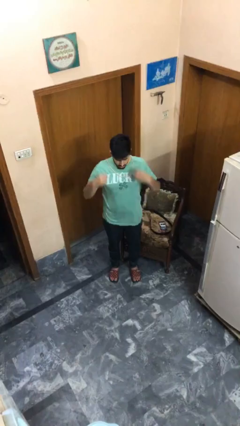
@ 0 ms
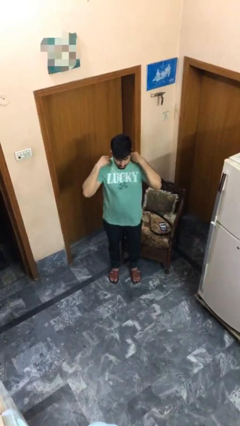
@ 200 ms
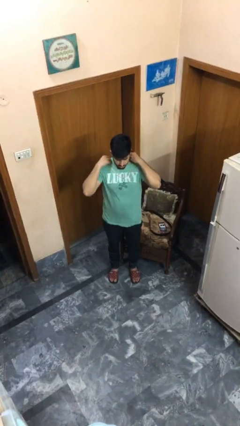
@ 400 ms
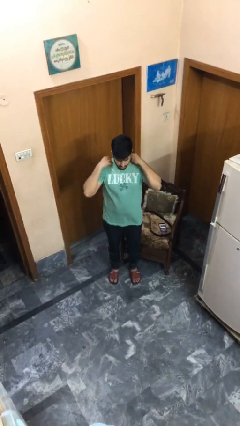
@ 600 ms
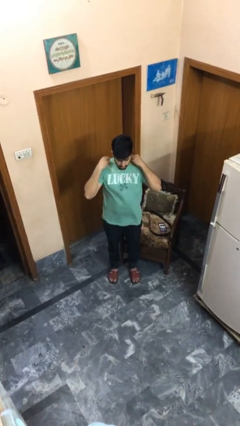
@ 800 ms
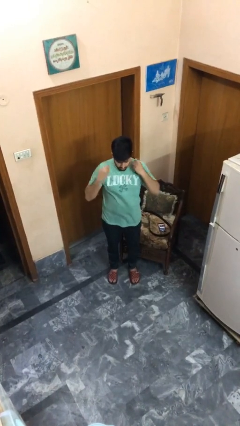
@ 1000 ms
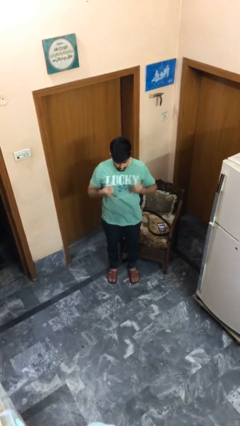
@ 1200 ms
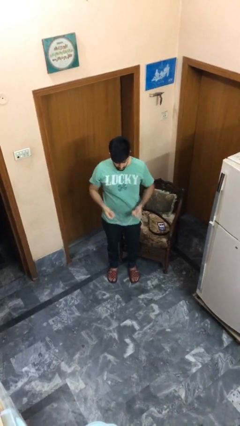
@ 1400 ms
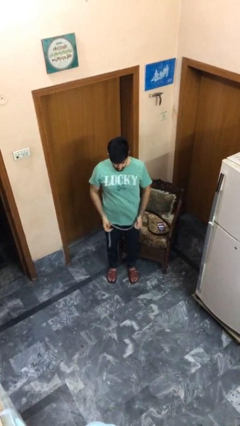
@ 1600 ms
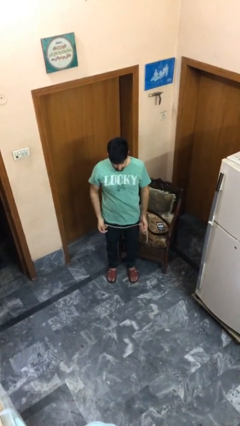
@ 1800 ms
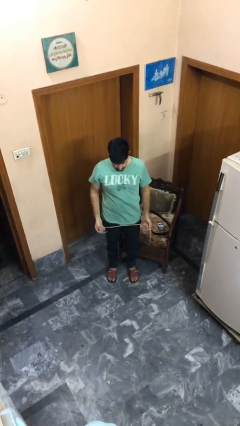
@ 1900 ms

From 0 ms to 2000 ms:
person takes off necklace

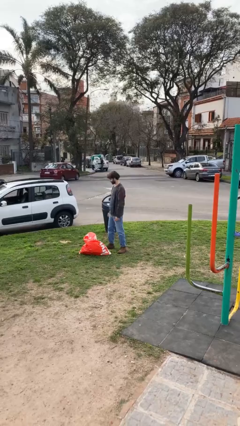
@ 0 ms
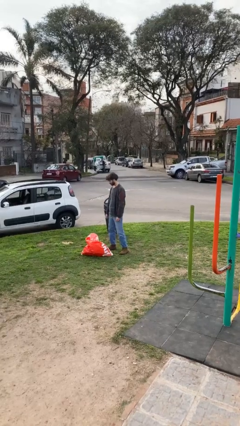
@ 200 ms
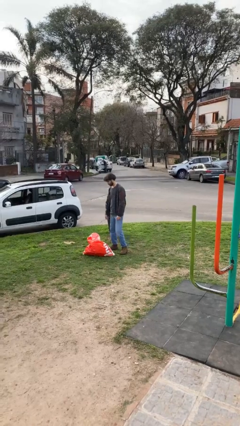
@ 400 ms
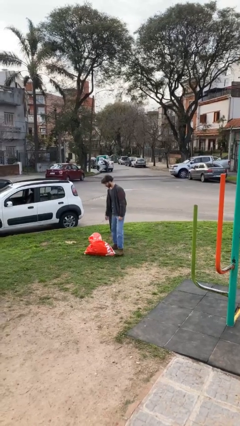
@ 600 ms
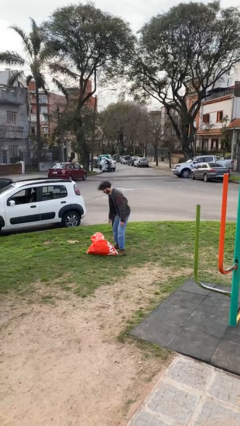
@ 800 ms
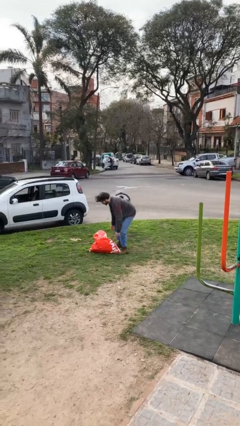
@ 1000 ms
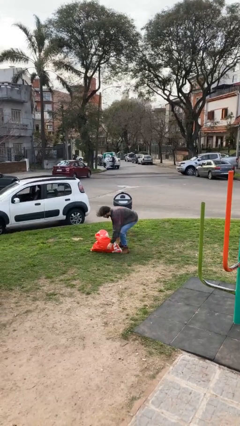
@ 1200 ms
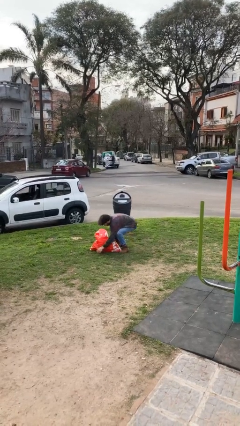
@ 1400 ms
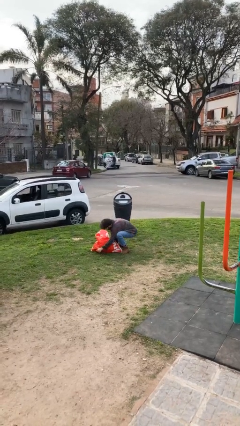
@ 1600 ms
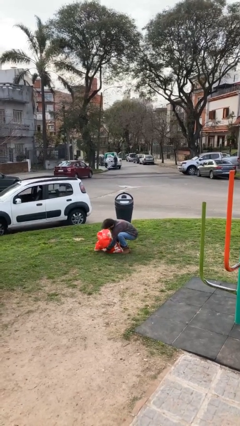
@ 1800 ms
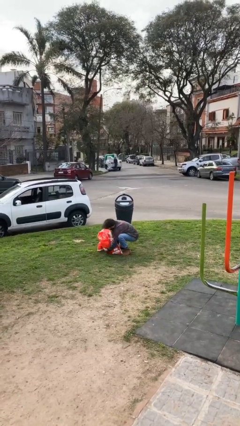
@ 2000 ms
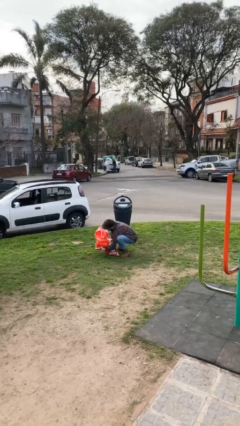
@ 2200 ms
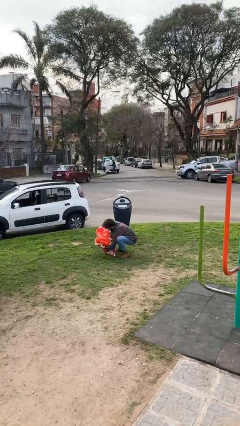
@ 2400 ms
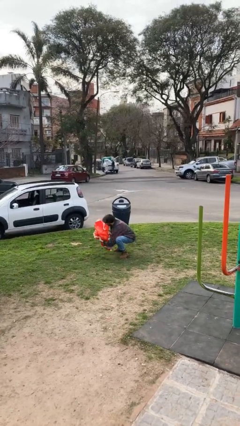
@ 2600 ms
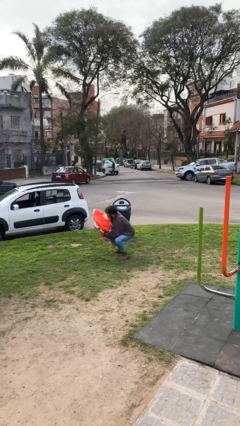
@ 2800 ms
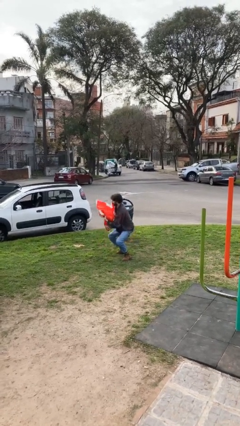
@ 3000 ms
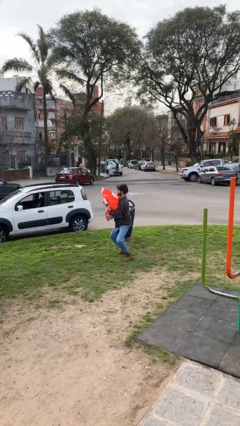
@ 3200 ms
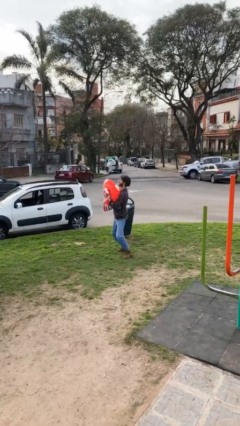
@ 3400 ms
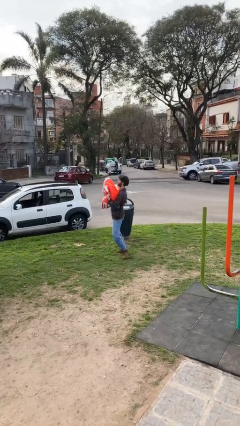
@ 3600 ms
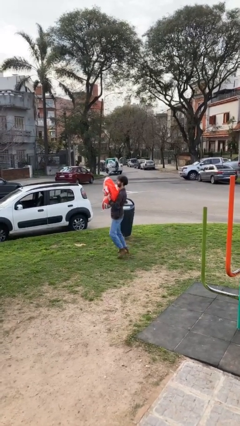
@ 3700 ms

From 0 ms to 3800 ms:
person picks up object from floor

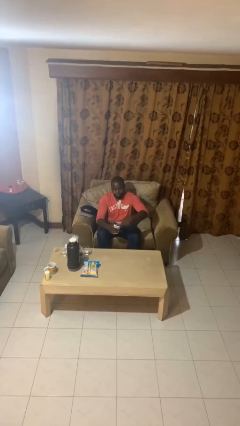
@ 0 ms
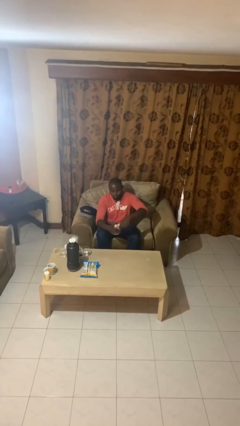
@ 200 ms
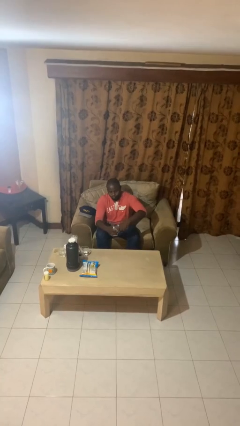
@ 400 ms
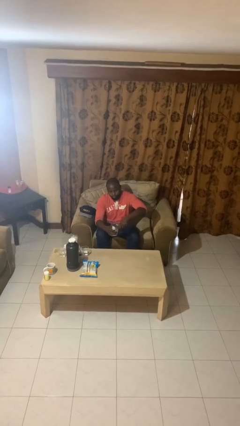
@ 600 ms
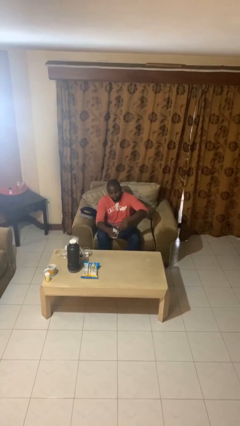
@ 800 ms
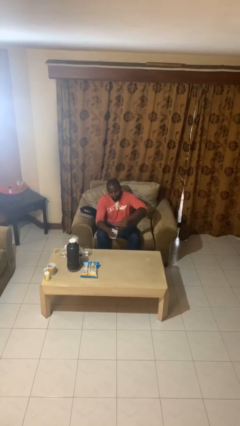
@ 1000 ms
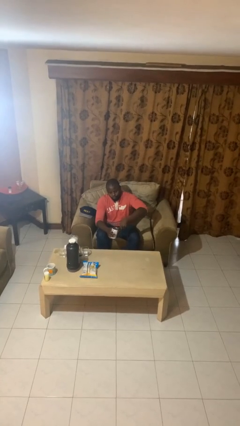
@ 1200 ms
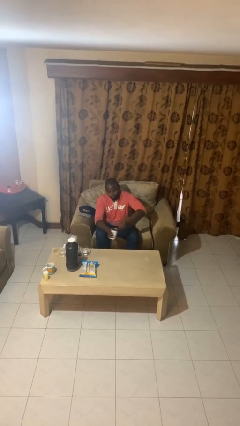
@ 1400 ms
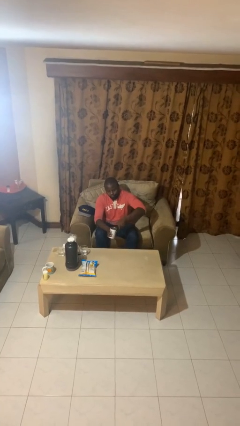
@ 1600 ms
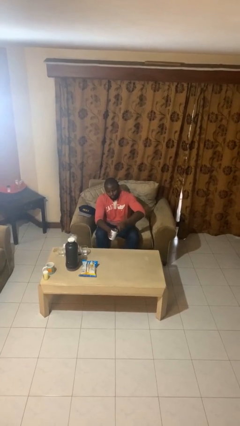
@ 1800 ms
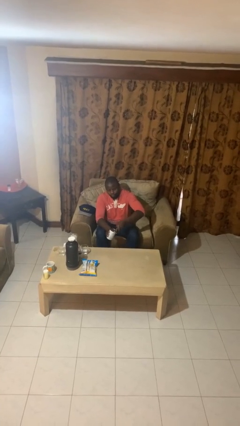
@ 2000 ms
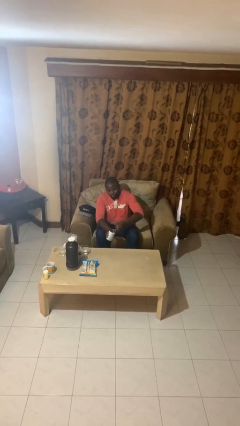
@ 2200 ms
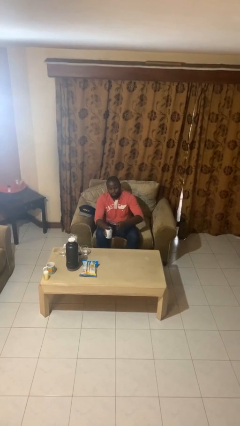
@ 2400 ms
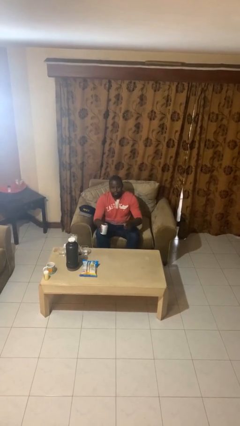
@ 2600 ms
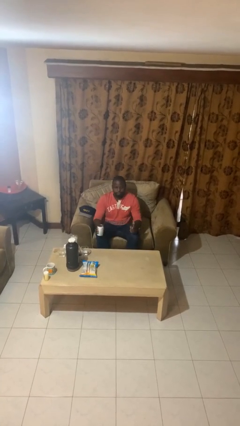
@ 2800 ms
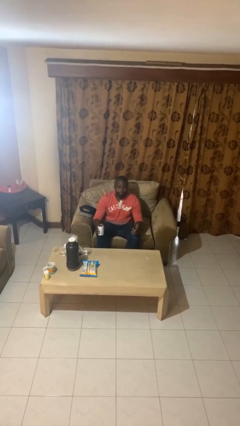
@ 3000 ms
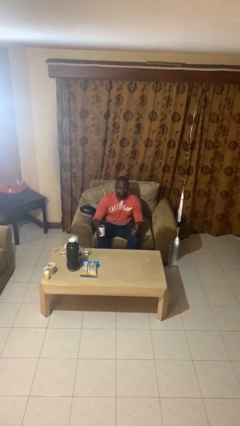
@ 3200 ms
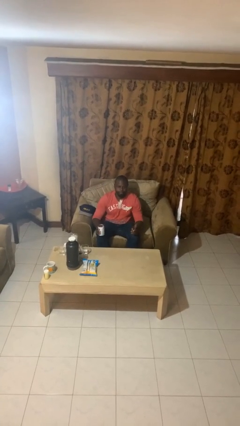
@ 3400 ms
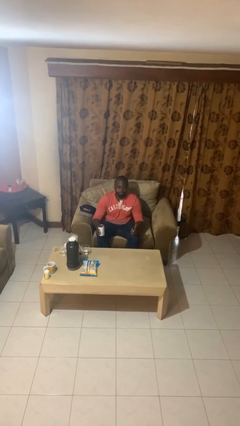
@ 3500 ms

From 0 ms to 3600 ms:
person opens can with can opener

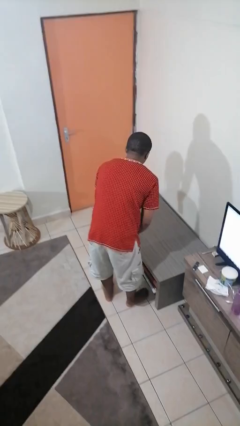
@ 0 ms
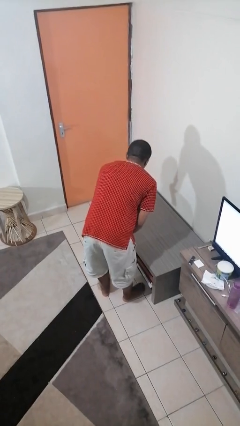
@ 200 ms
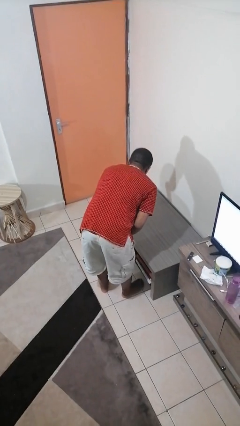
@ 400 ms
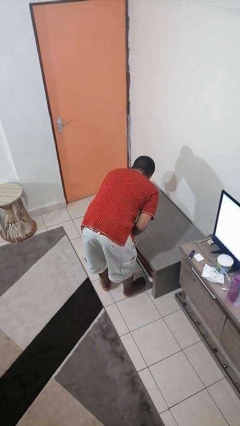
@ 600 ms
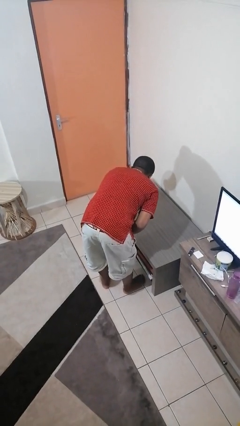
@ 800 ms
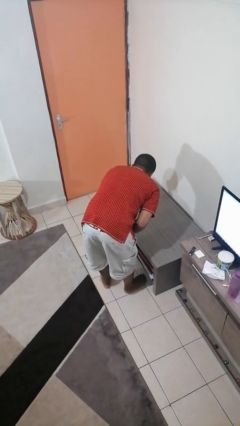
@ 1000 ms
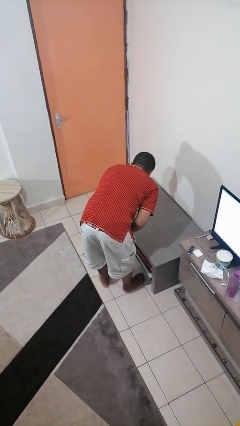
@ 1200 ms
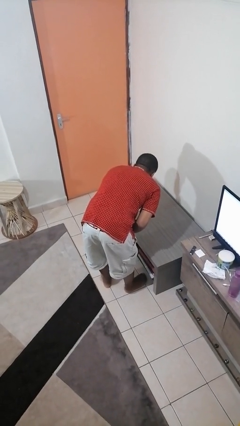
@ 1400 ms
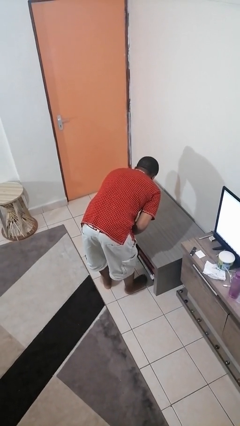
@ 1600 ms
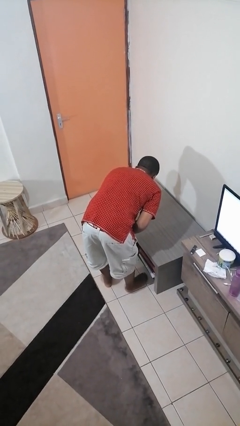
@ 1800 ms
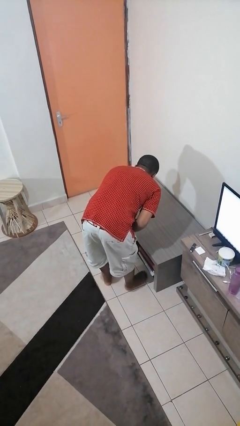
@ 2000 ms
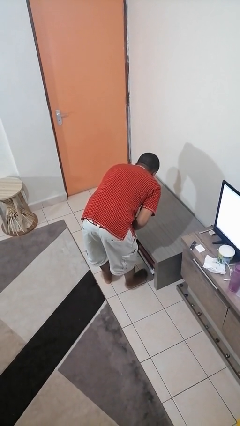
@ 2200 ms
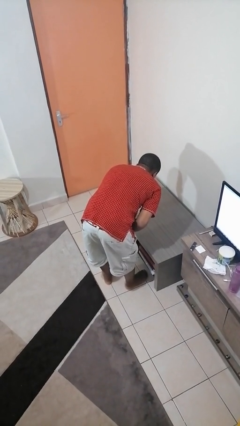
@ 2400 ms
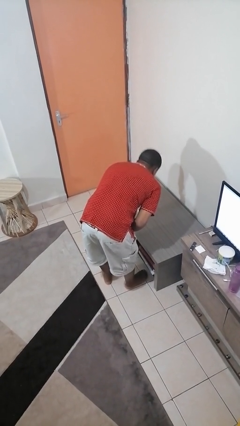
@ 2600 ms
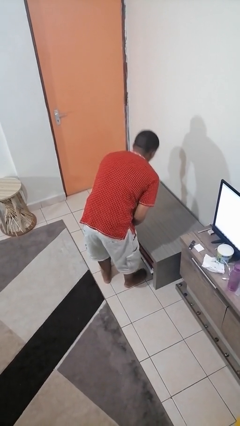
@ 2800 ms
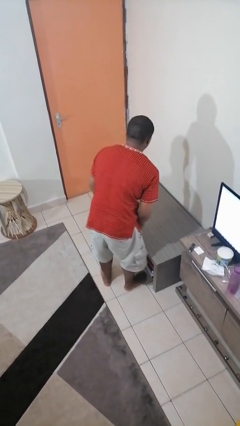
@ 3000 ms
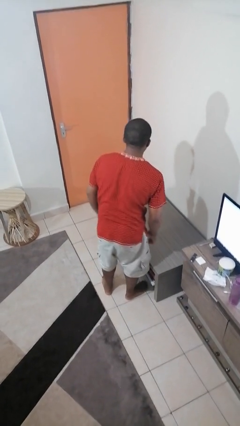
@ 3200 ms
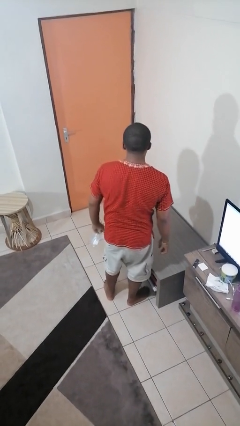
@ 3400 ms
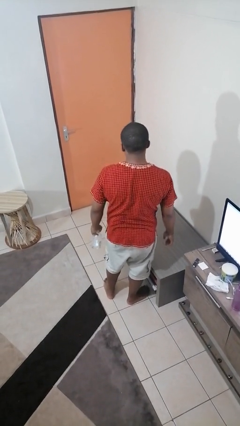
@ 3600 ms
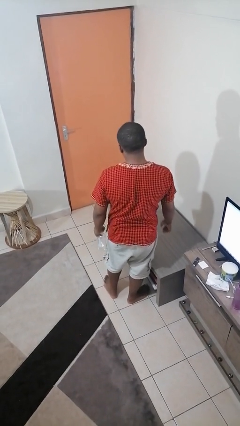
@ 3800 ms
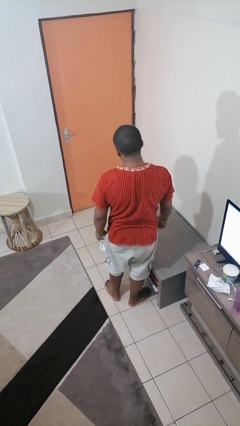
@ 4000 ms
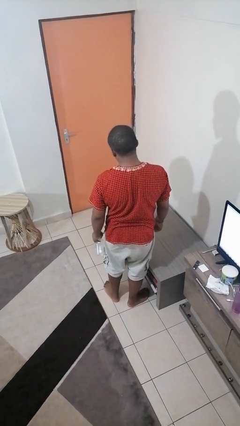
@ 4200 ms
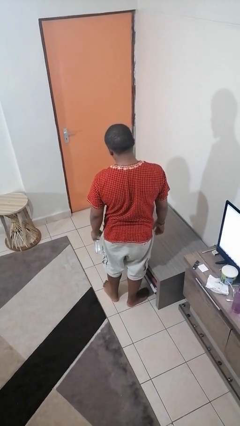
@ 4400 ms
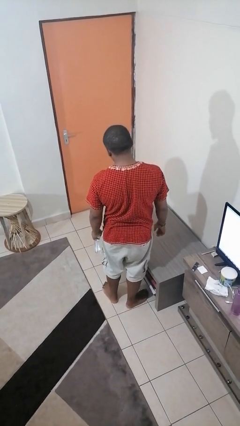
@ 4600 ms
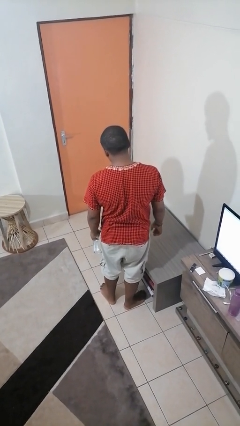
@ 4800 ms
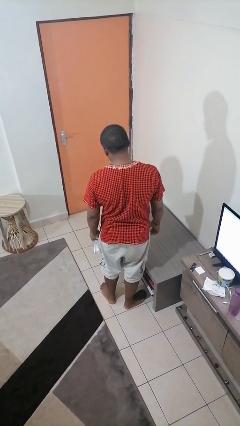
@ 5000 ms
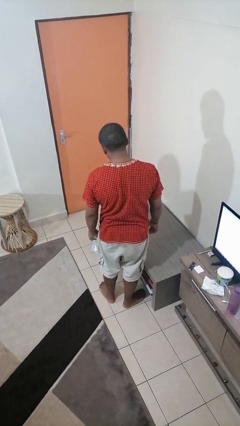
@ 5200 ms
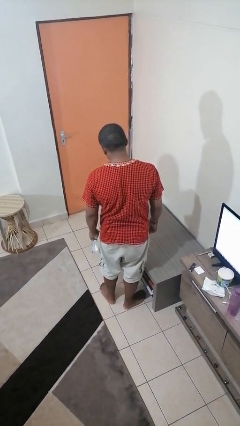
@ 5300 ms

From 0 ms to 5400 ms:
person sprays from bottle

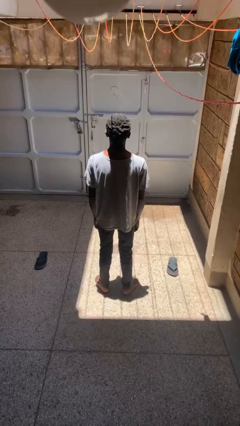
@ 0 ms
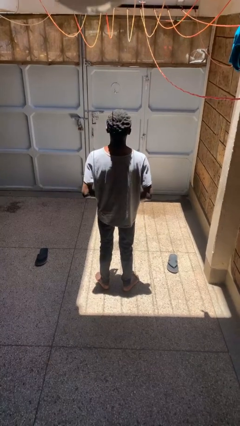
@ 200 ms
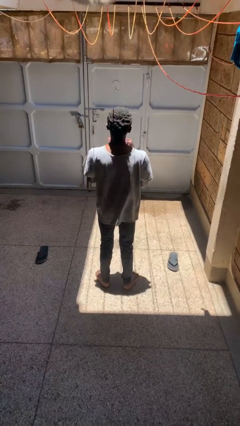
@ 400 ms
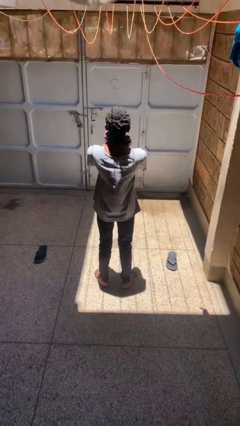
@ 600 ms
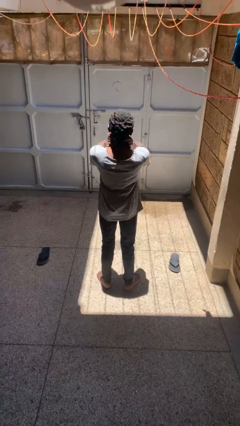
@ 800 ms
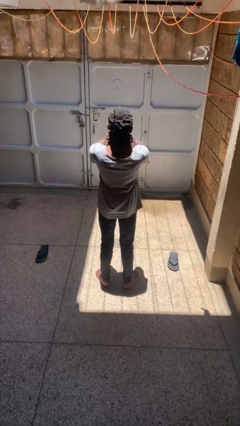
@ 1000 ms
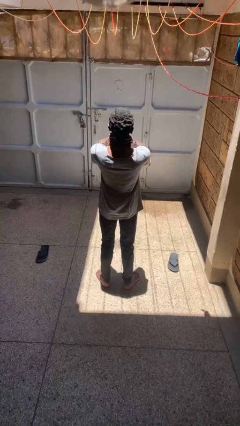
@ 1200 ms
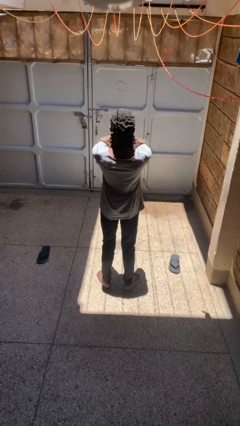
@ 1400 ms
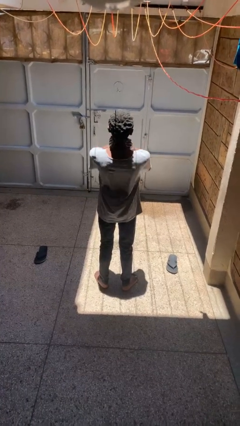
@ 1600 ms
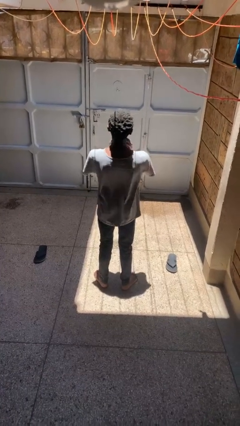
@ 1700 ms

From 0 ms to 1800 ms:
person rubs neck

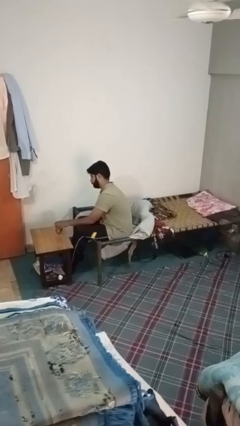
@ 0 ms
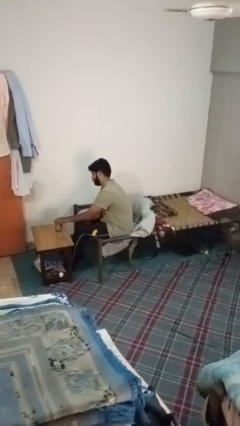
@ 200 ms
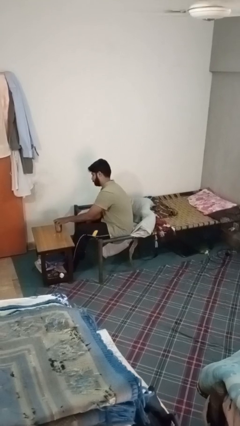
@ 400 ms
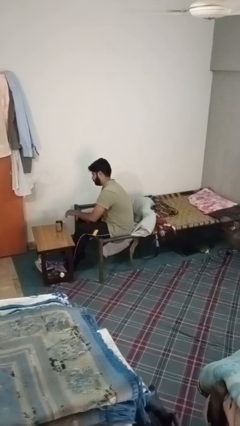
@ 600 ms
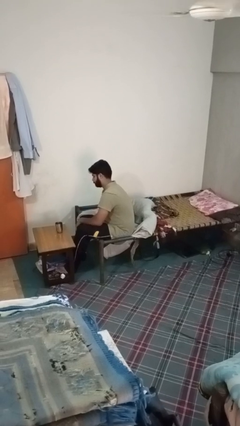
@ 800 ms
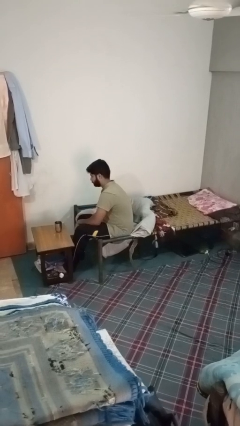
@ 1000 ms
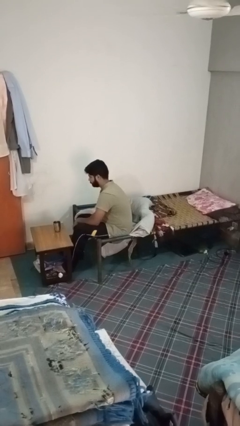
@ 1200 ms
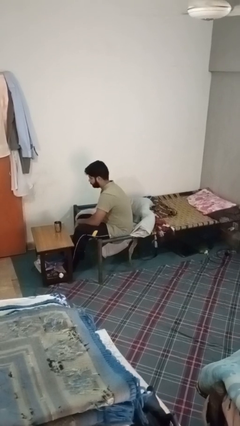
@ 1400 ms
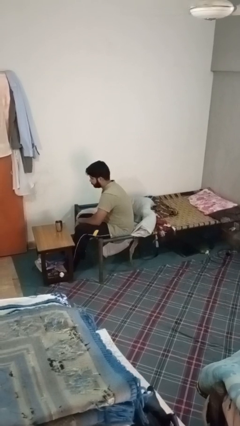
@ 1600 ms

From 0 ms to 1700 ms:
person sets upright glass
